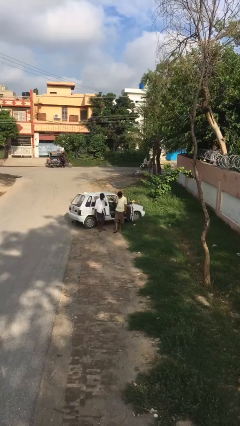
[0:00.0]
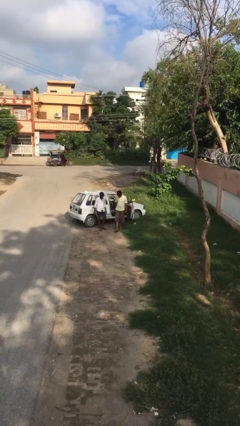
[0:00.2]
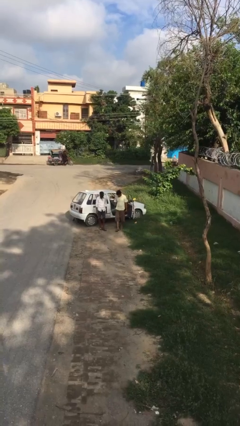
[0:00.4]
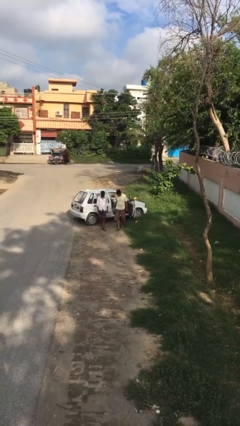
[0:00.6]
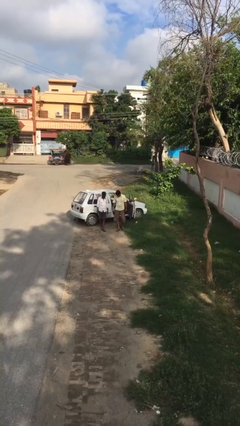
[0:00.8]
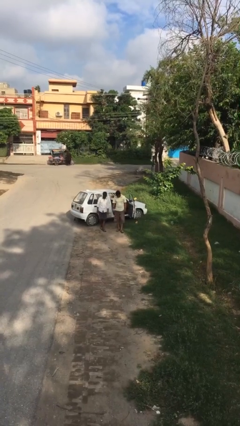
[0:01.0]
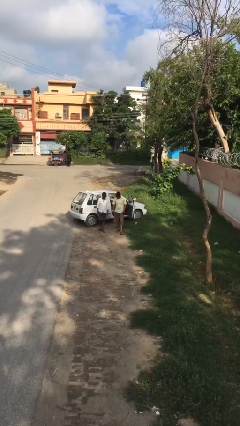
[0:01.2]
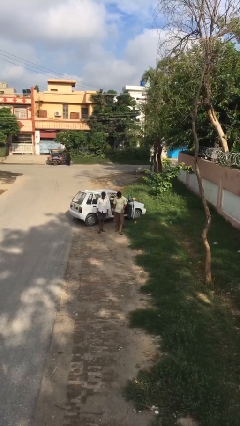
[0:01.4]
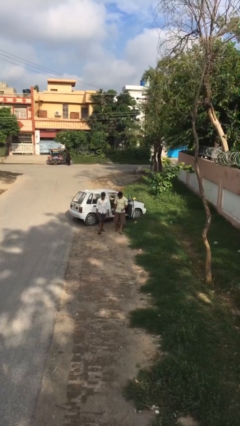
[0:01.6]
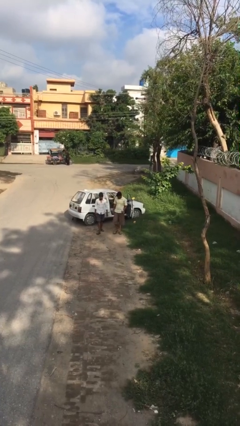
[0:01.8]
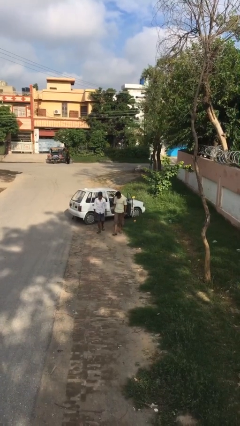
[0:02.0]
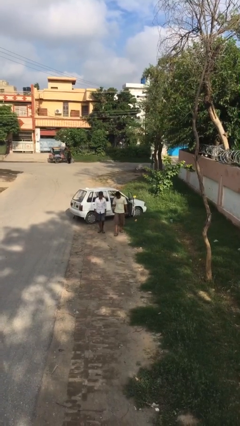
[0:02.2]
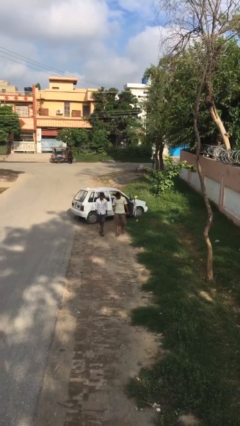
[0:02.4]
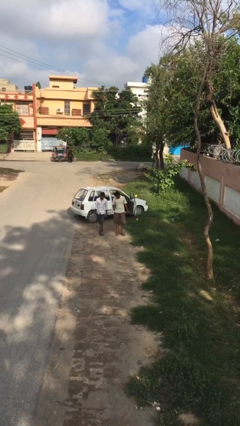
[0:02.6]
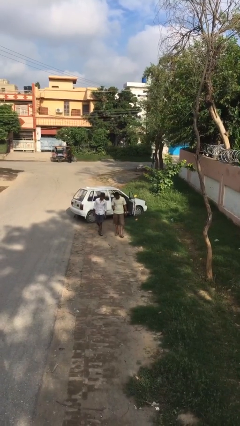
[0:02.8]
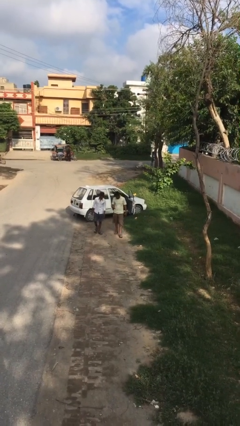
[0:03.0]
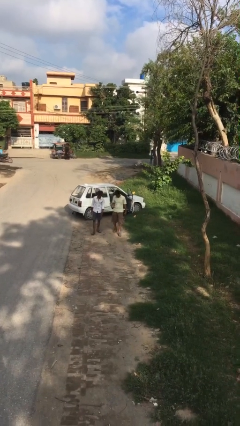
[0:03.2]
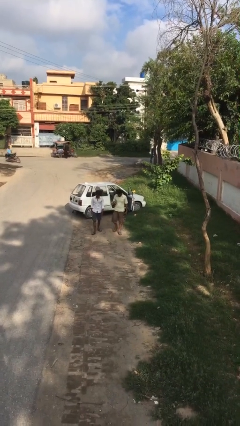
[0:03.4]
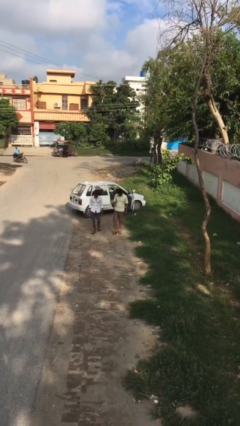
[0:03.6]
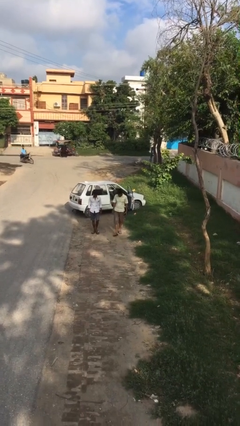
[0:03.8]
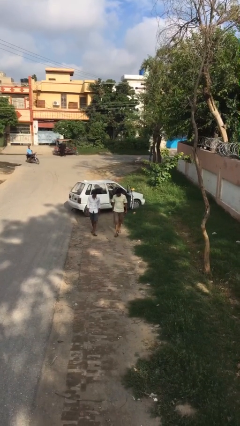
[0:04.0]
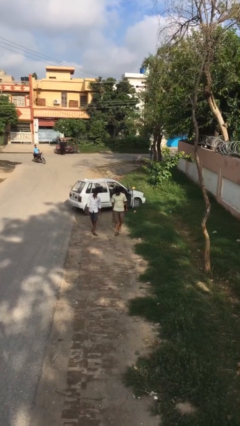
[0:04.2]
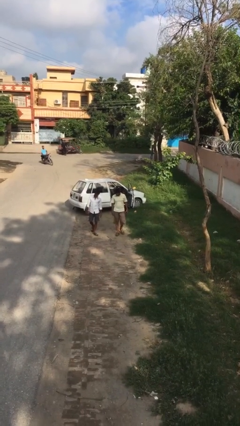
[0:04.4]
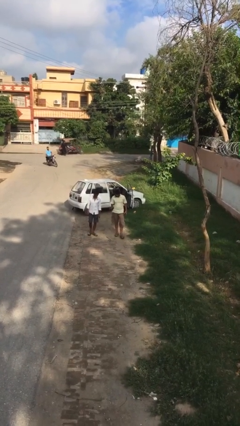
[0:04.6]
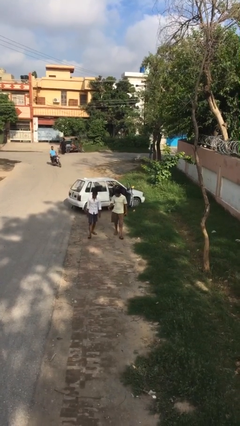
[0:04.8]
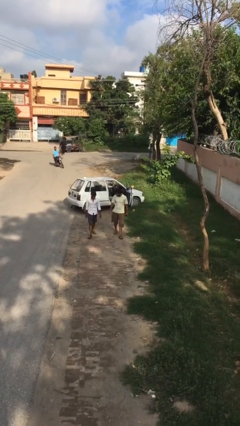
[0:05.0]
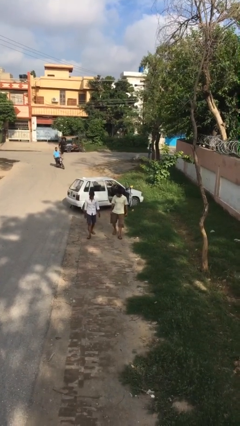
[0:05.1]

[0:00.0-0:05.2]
person talks to person

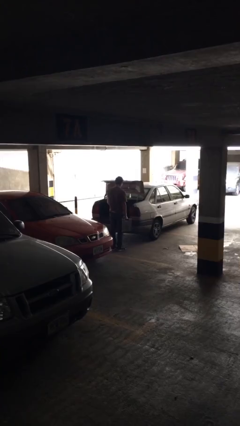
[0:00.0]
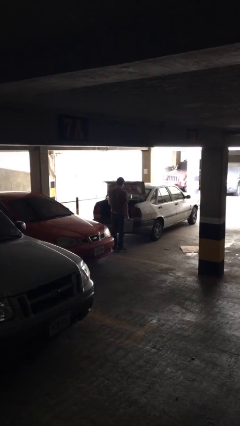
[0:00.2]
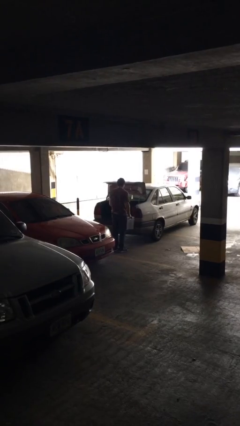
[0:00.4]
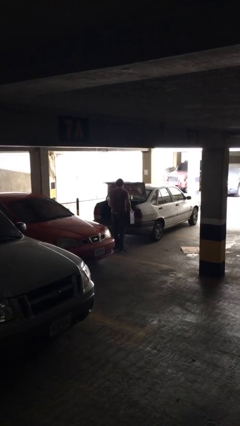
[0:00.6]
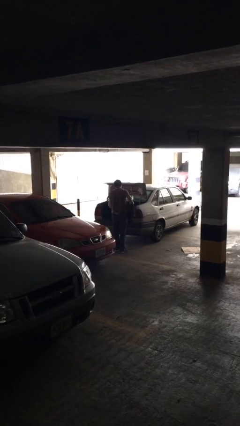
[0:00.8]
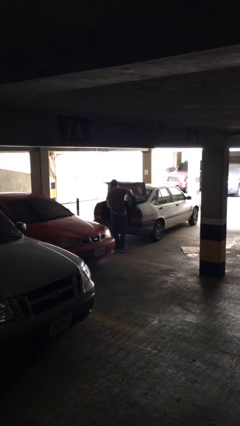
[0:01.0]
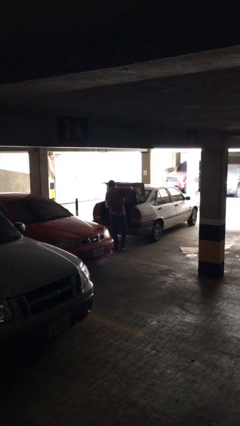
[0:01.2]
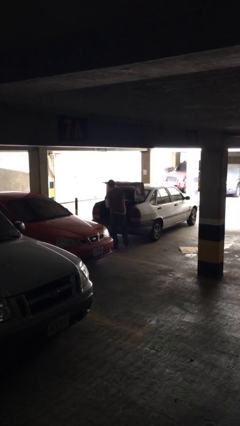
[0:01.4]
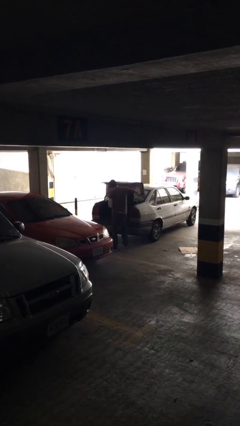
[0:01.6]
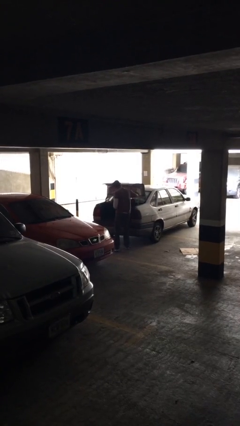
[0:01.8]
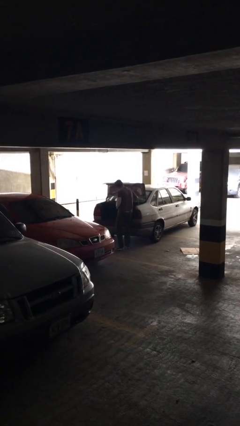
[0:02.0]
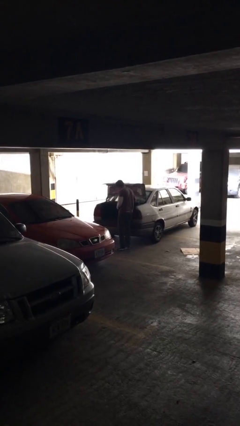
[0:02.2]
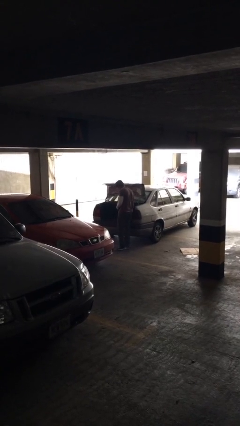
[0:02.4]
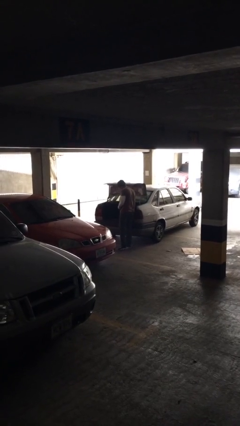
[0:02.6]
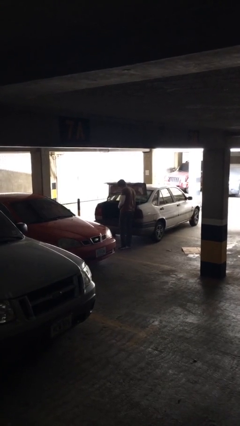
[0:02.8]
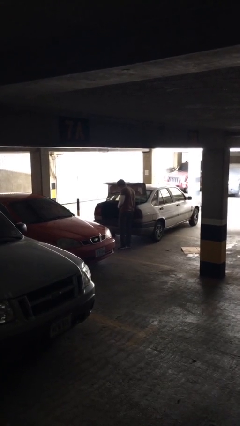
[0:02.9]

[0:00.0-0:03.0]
person loads car

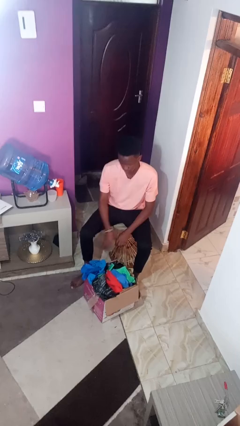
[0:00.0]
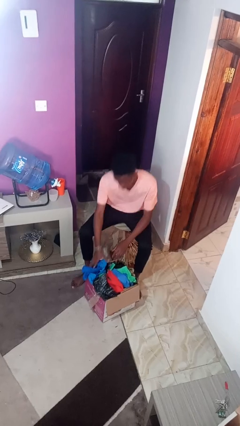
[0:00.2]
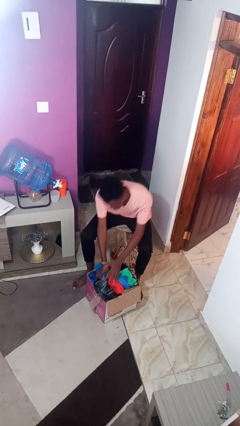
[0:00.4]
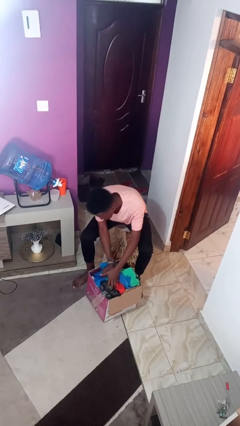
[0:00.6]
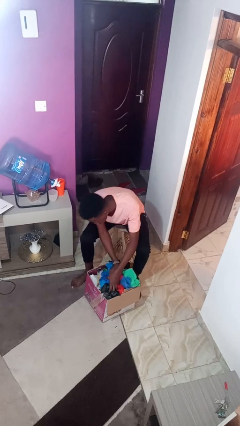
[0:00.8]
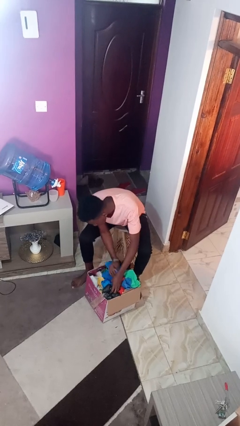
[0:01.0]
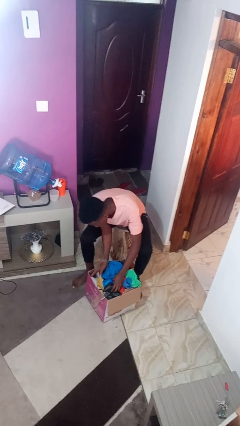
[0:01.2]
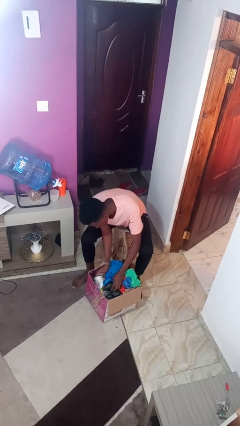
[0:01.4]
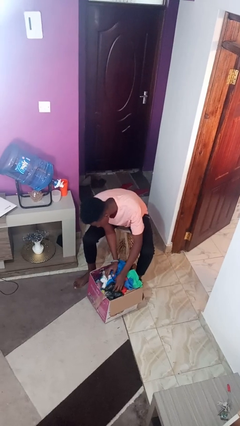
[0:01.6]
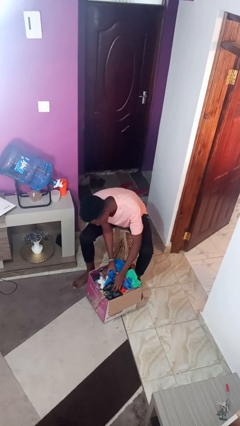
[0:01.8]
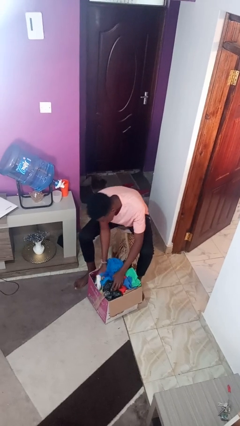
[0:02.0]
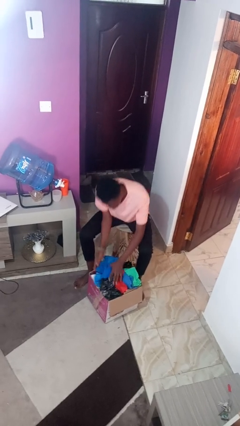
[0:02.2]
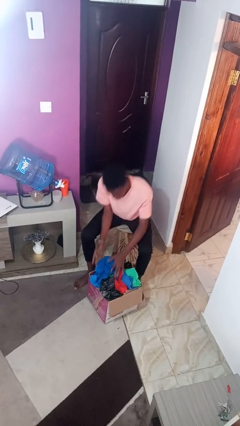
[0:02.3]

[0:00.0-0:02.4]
person searches in box

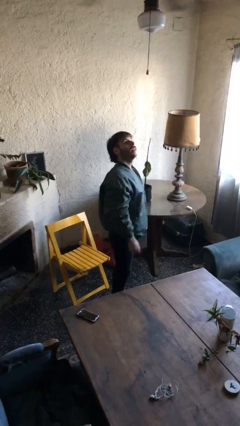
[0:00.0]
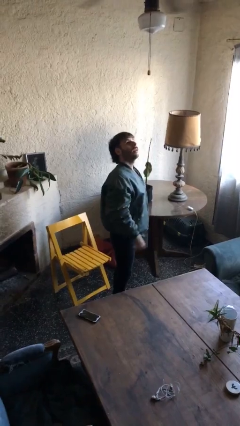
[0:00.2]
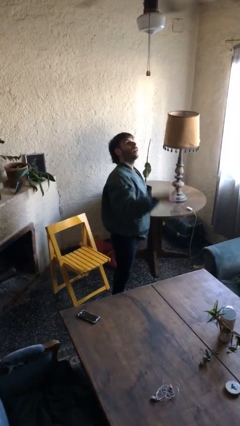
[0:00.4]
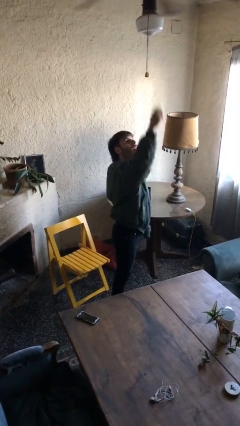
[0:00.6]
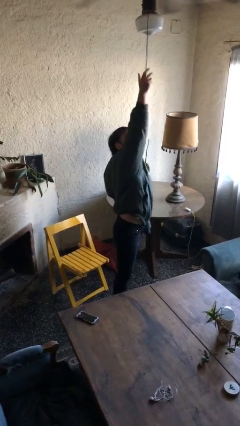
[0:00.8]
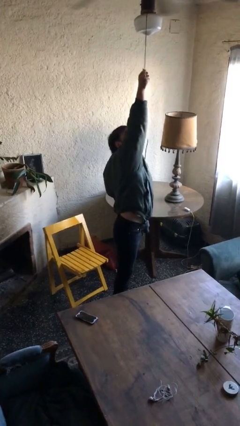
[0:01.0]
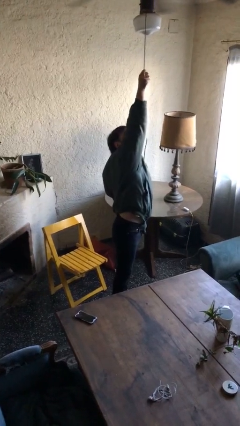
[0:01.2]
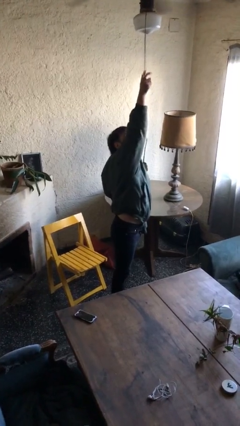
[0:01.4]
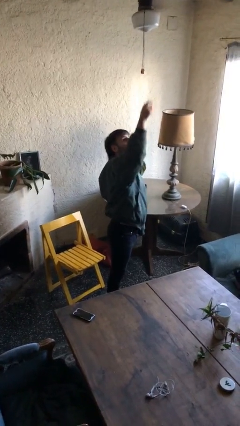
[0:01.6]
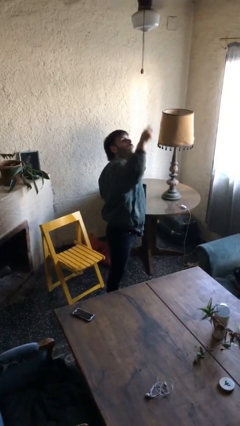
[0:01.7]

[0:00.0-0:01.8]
person turns off fan

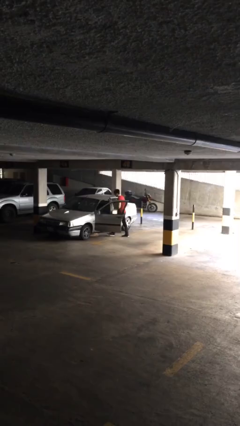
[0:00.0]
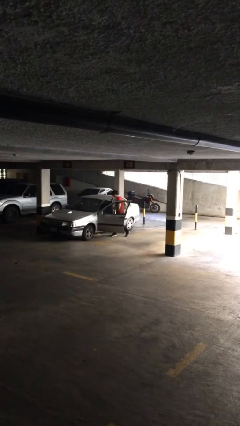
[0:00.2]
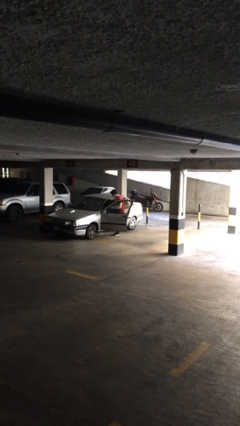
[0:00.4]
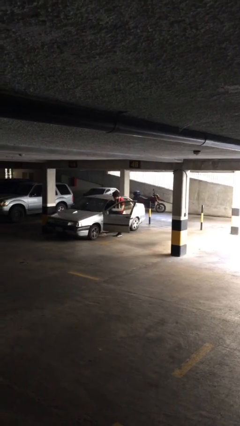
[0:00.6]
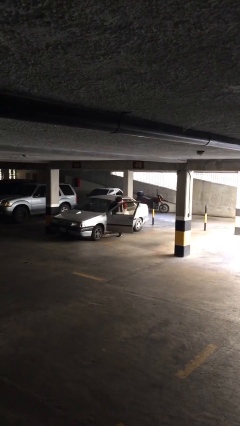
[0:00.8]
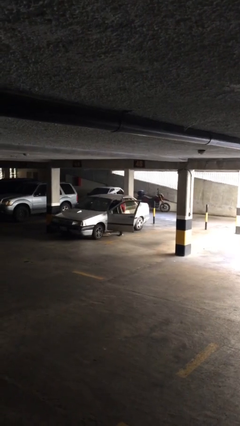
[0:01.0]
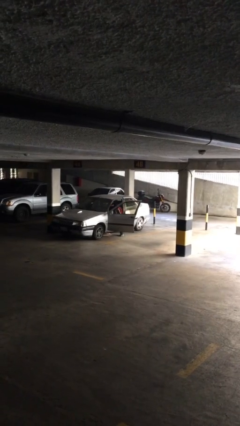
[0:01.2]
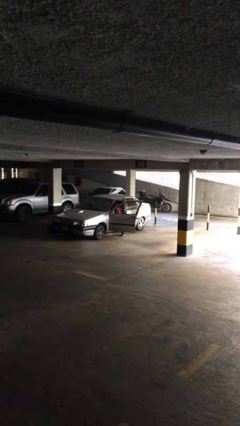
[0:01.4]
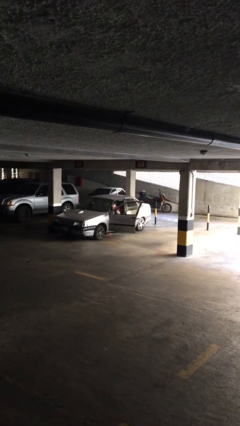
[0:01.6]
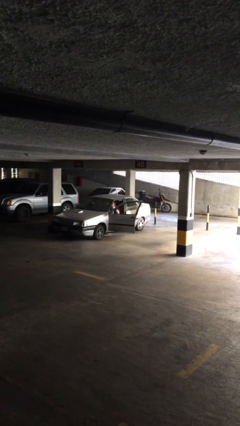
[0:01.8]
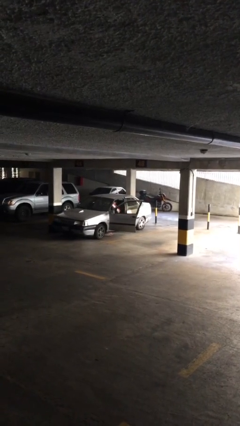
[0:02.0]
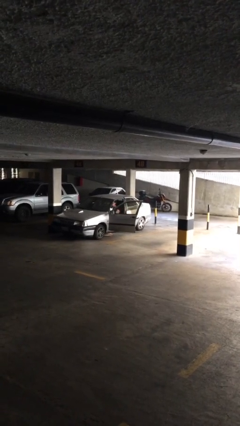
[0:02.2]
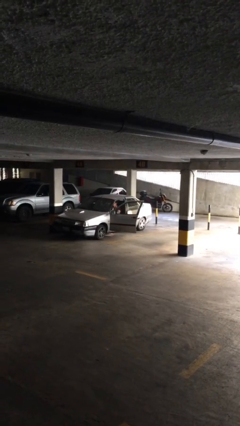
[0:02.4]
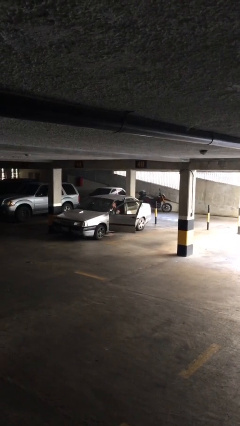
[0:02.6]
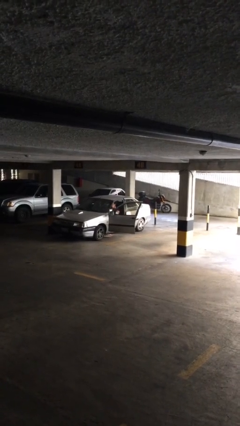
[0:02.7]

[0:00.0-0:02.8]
person enters car

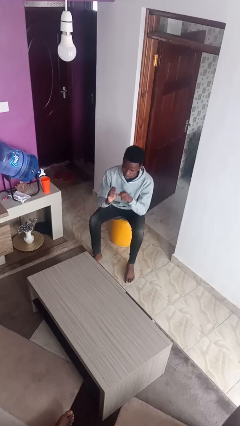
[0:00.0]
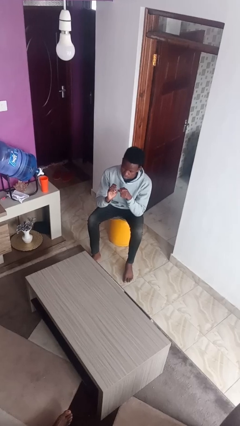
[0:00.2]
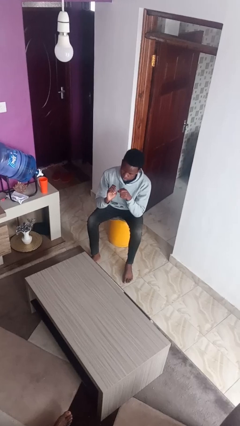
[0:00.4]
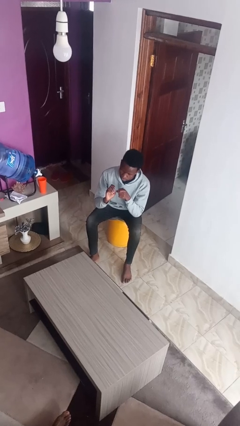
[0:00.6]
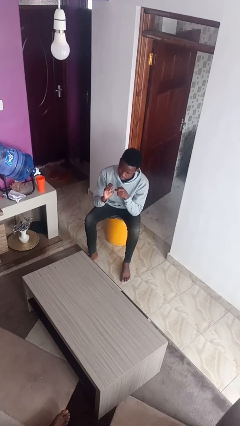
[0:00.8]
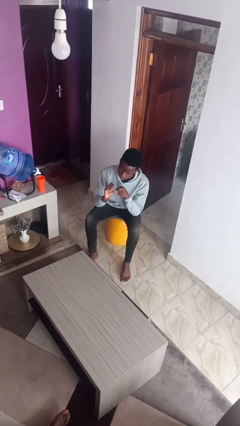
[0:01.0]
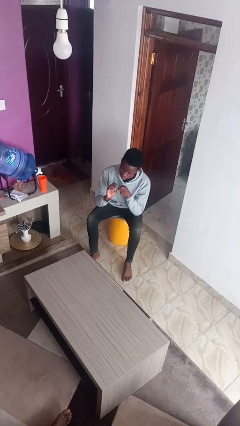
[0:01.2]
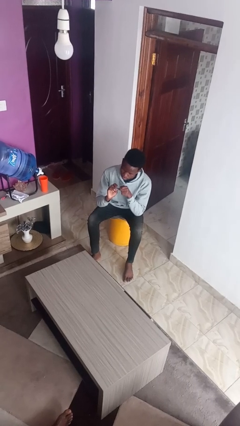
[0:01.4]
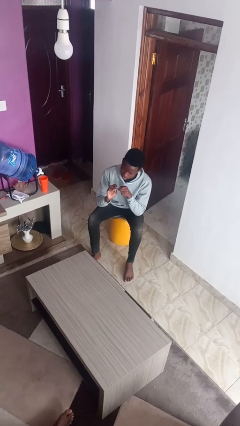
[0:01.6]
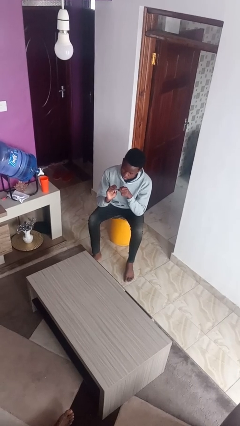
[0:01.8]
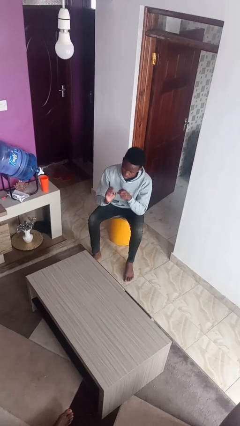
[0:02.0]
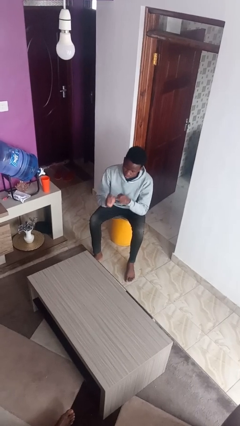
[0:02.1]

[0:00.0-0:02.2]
person files fingernails

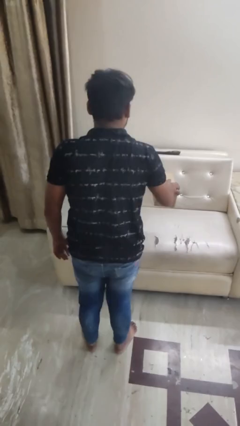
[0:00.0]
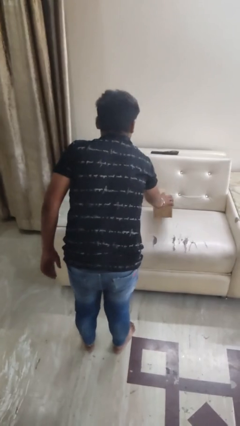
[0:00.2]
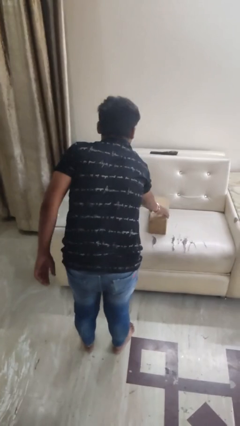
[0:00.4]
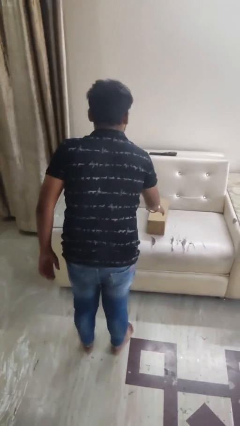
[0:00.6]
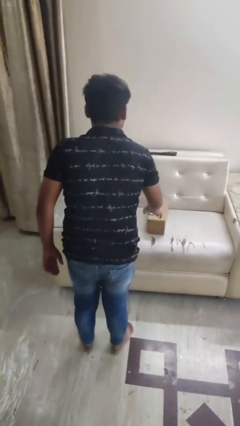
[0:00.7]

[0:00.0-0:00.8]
person puts down object on bed
